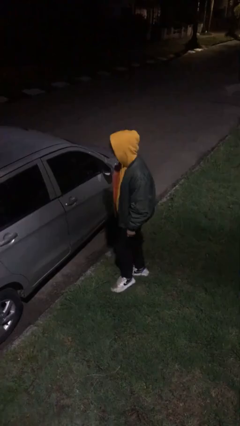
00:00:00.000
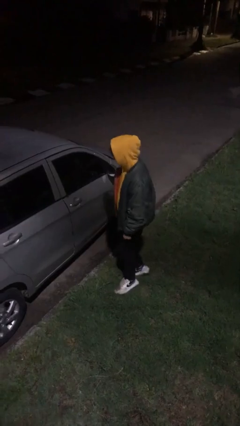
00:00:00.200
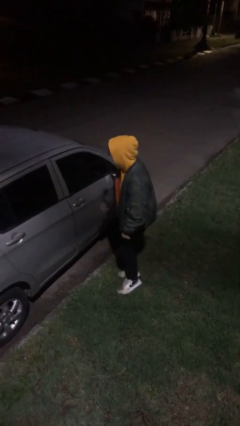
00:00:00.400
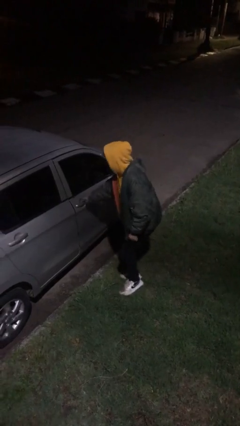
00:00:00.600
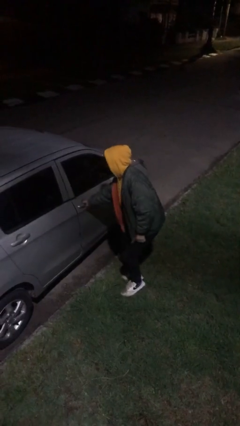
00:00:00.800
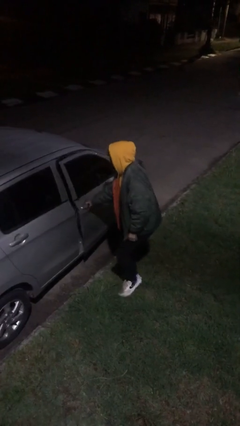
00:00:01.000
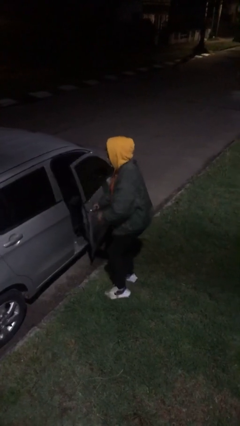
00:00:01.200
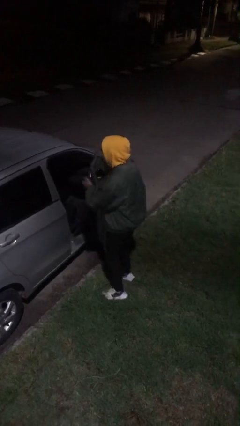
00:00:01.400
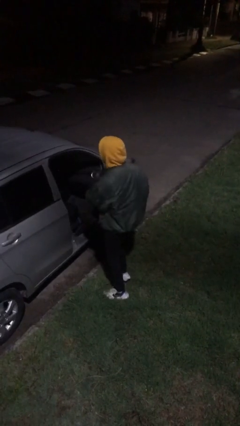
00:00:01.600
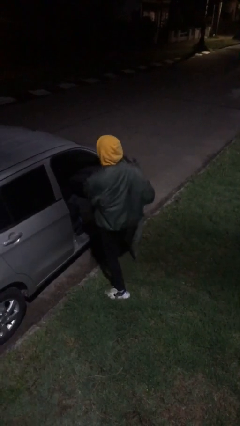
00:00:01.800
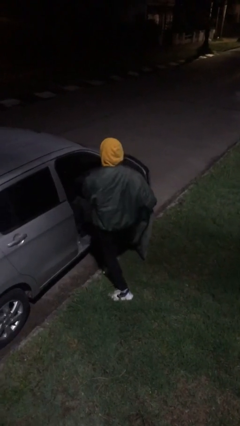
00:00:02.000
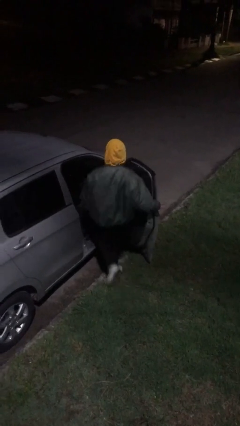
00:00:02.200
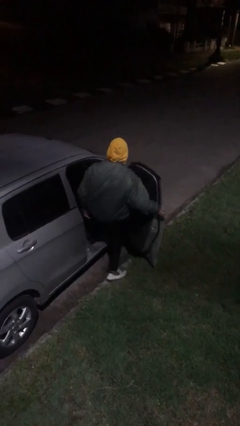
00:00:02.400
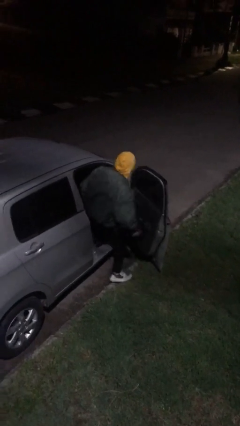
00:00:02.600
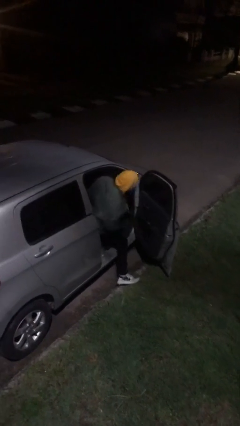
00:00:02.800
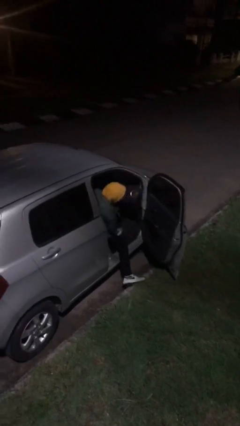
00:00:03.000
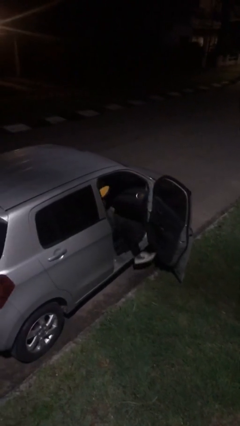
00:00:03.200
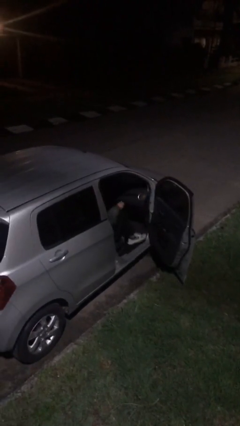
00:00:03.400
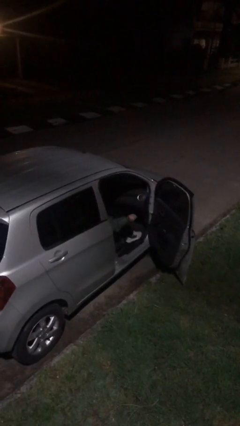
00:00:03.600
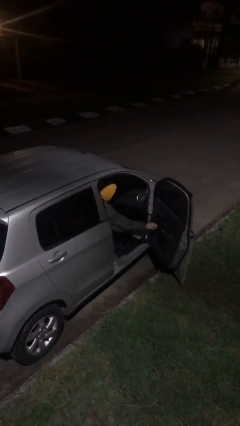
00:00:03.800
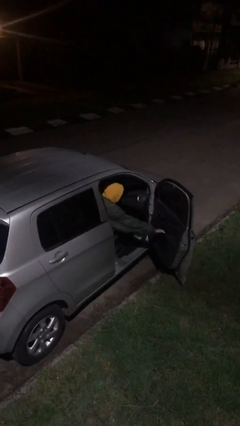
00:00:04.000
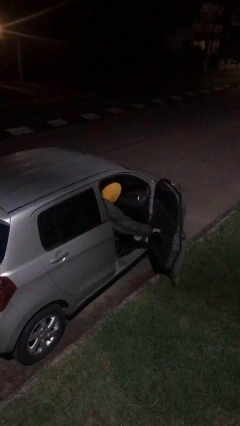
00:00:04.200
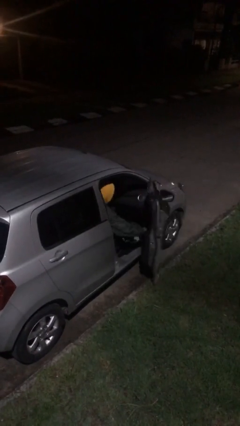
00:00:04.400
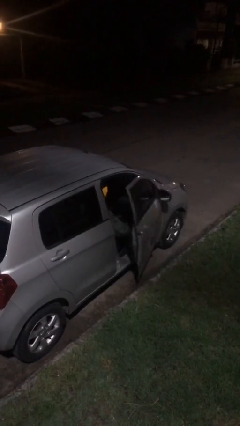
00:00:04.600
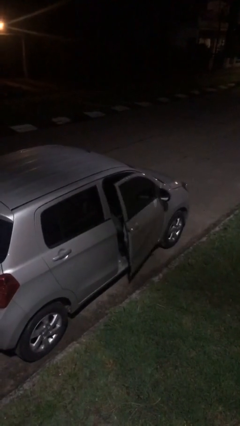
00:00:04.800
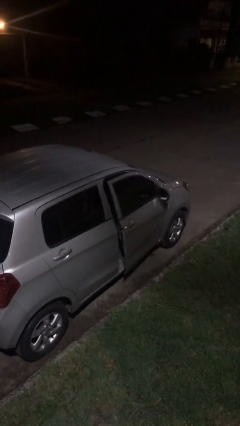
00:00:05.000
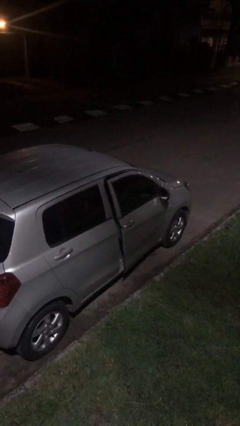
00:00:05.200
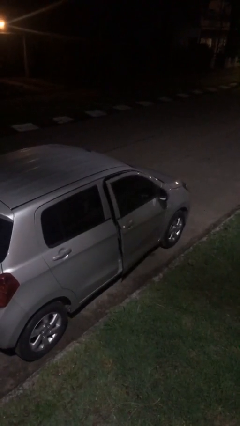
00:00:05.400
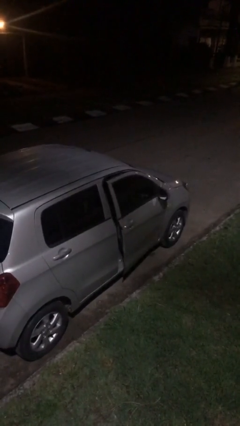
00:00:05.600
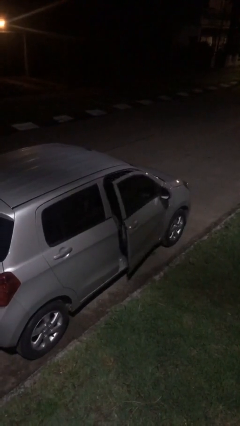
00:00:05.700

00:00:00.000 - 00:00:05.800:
car picks up person

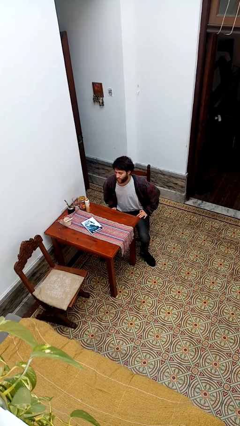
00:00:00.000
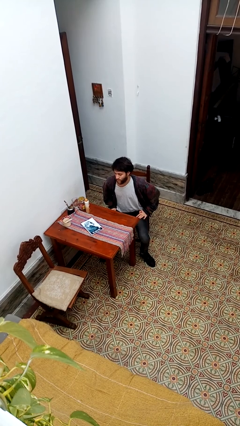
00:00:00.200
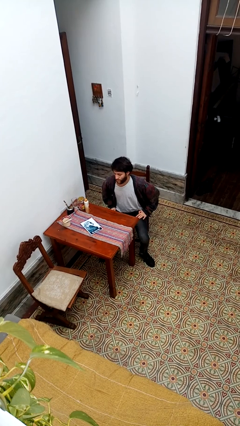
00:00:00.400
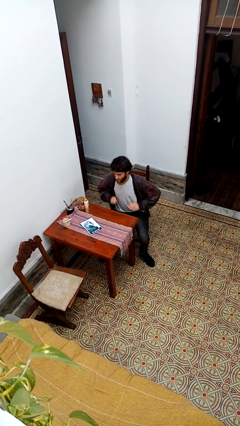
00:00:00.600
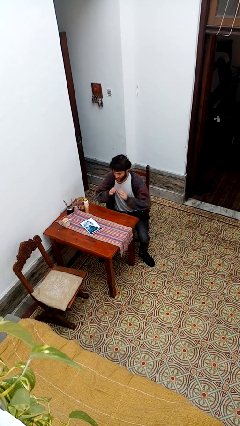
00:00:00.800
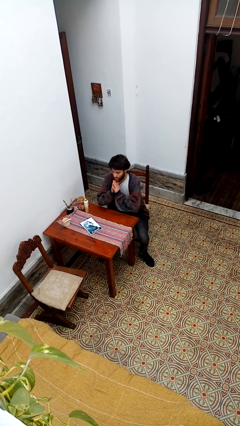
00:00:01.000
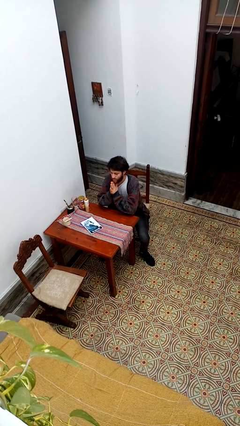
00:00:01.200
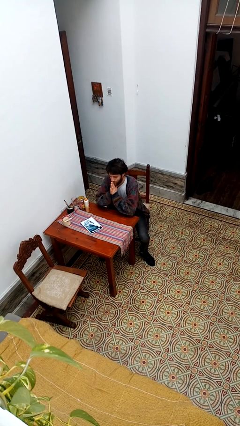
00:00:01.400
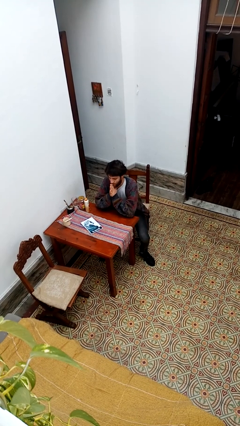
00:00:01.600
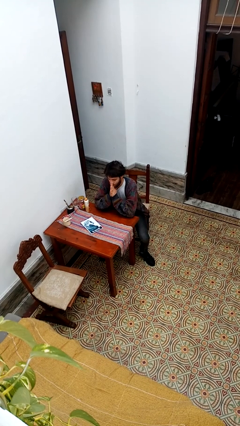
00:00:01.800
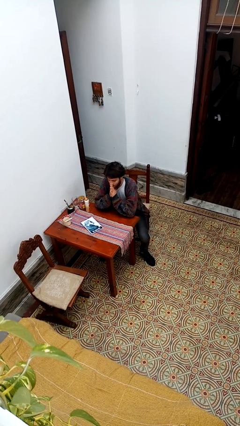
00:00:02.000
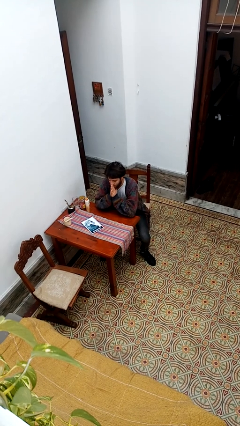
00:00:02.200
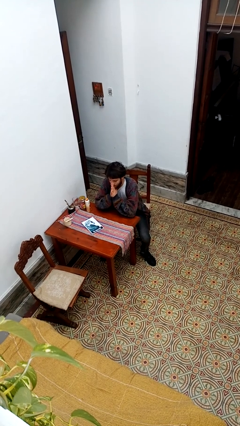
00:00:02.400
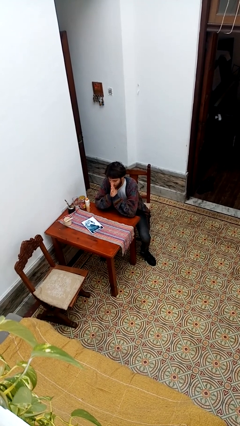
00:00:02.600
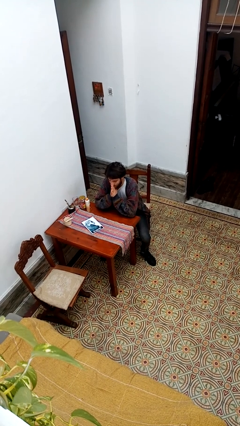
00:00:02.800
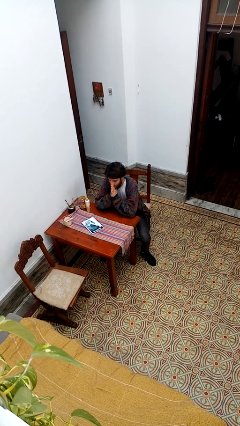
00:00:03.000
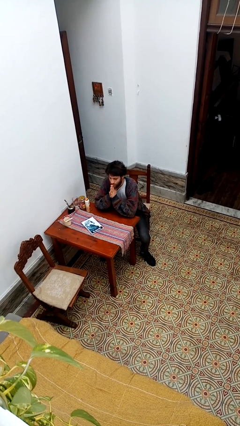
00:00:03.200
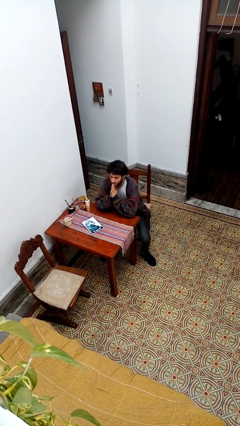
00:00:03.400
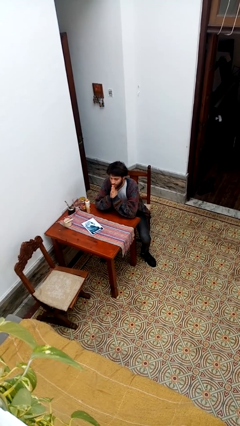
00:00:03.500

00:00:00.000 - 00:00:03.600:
person prays

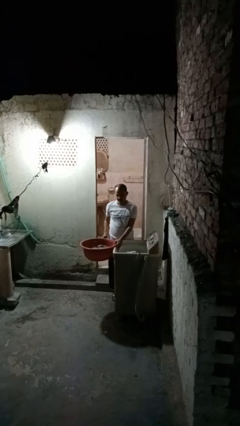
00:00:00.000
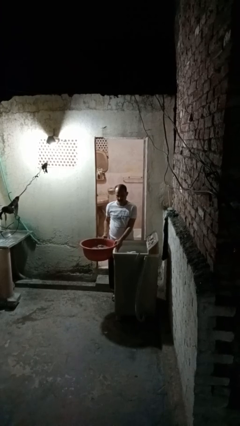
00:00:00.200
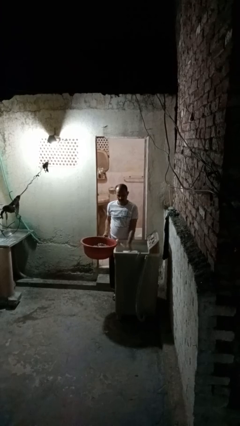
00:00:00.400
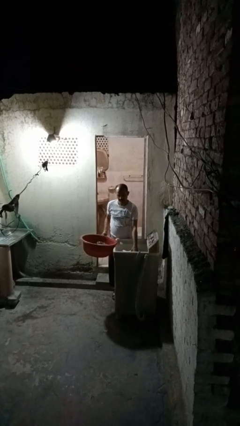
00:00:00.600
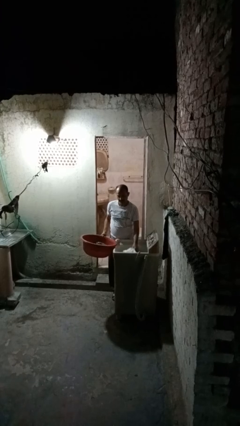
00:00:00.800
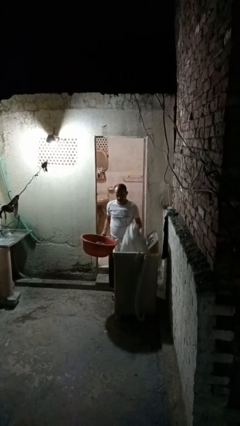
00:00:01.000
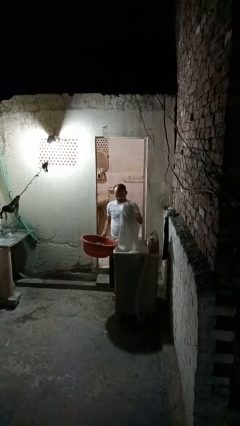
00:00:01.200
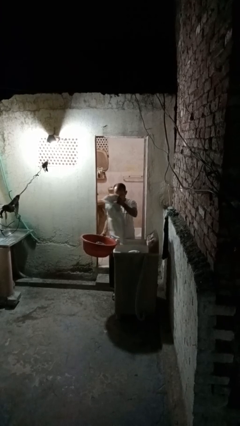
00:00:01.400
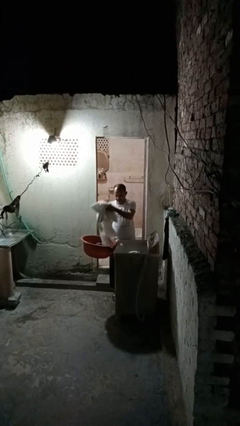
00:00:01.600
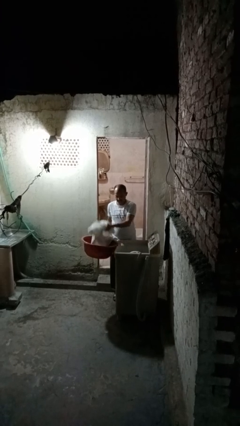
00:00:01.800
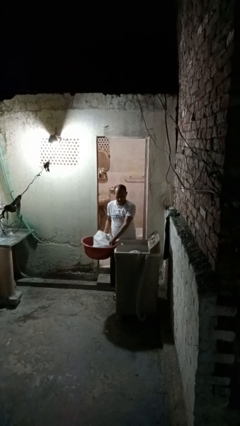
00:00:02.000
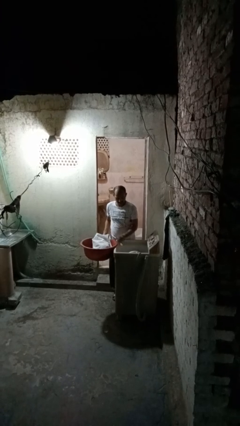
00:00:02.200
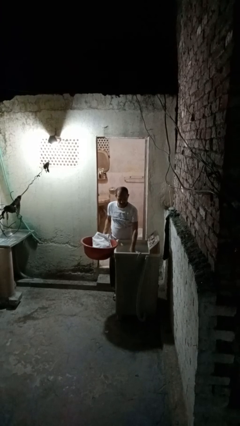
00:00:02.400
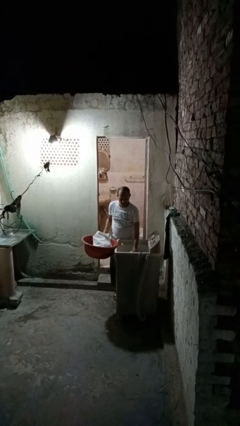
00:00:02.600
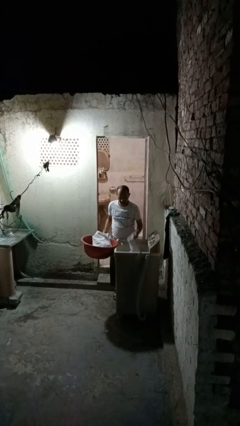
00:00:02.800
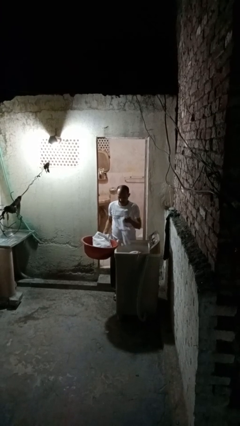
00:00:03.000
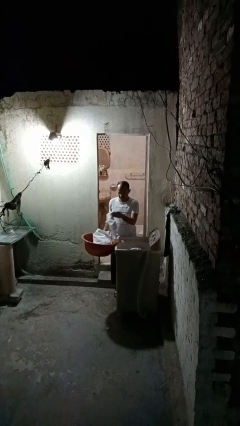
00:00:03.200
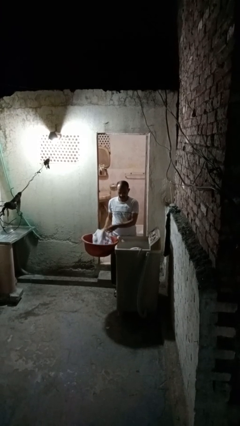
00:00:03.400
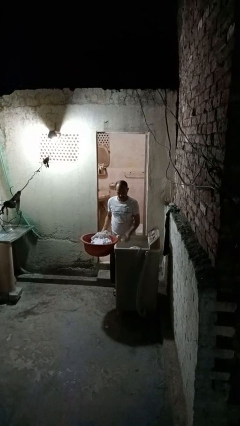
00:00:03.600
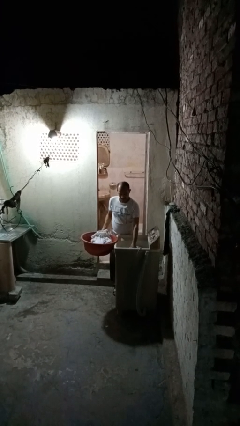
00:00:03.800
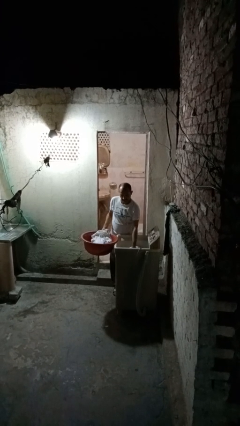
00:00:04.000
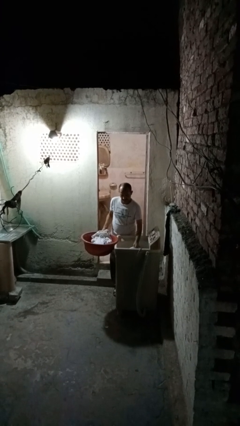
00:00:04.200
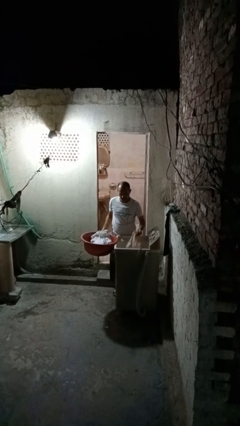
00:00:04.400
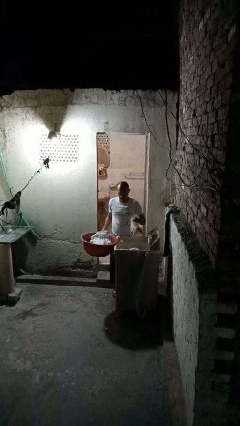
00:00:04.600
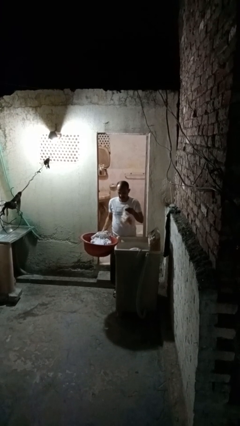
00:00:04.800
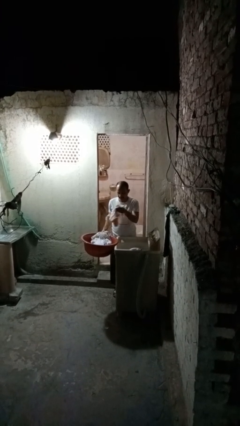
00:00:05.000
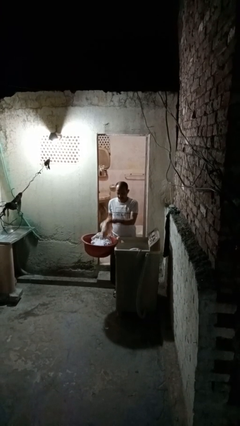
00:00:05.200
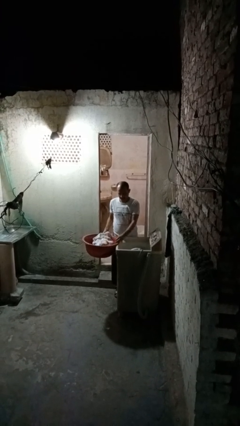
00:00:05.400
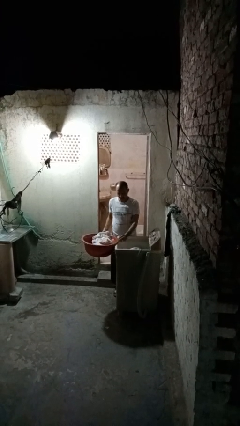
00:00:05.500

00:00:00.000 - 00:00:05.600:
person unloads clotheswasher

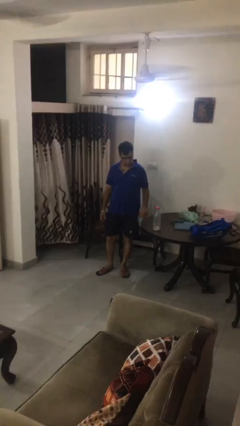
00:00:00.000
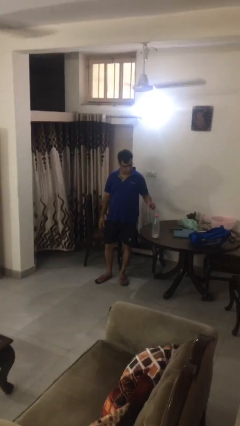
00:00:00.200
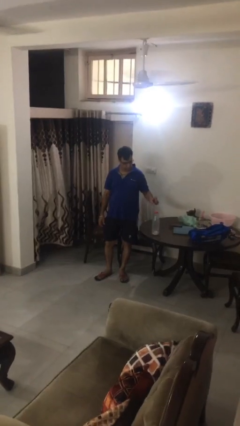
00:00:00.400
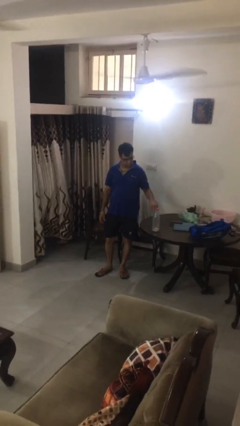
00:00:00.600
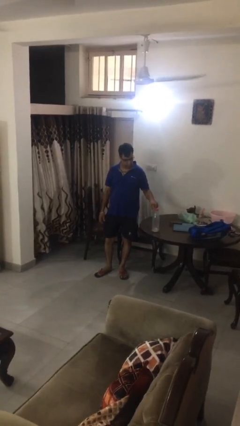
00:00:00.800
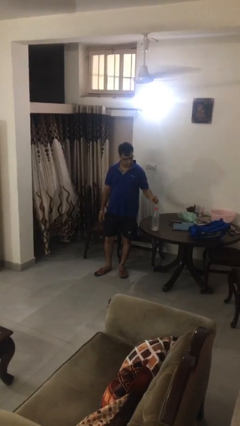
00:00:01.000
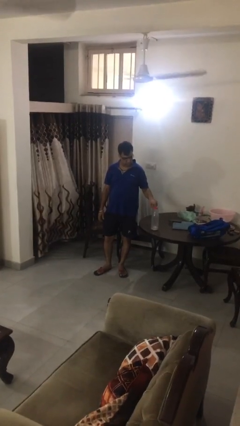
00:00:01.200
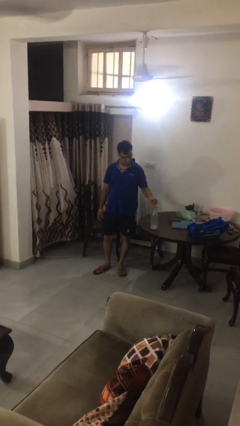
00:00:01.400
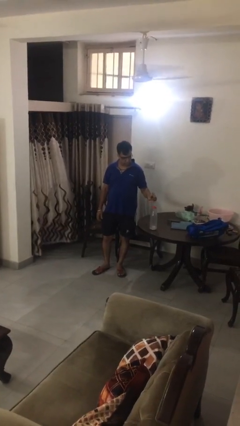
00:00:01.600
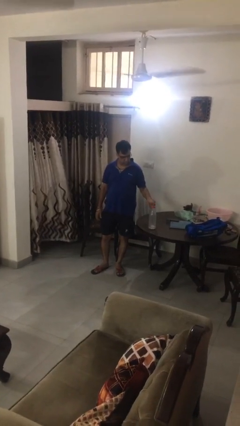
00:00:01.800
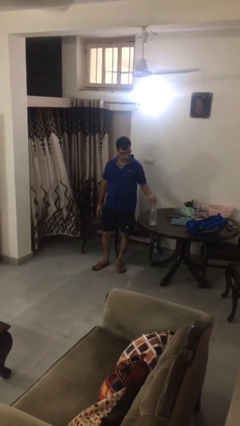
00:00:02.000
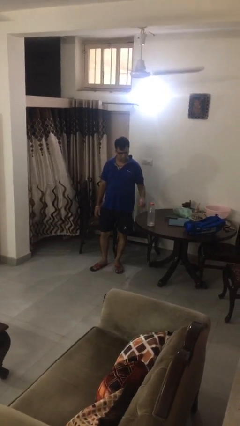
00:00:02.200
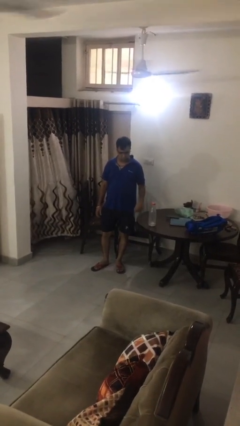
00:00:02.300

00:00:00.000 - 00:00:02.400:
person taps object with finger

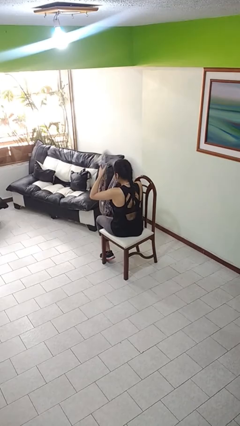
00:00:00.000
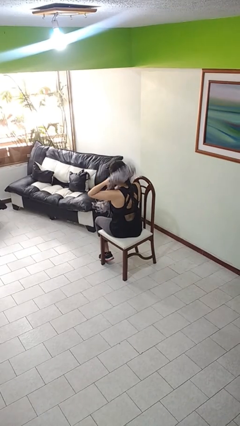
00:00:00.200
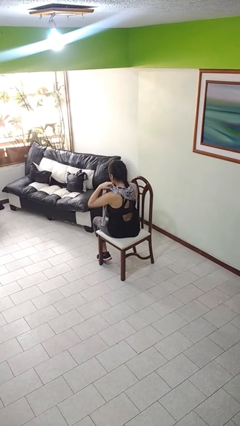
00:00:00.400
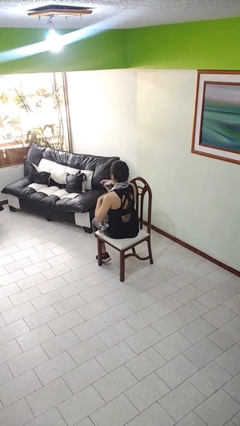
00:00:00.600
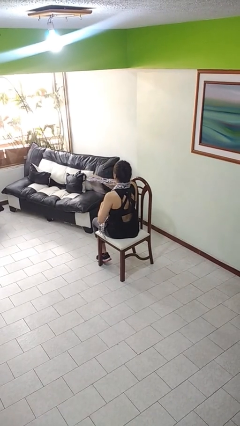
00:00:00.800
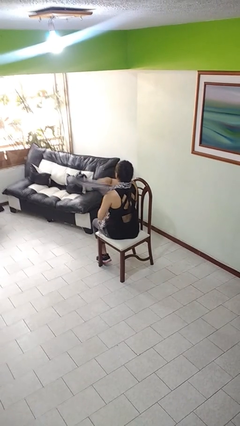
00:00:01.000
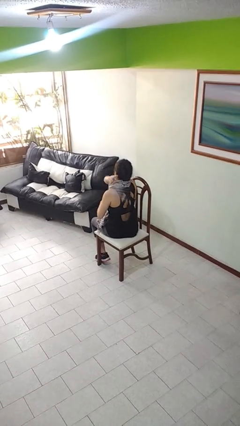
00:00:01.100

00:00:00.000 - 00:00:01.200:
person puts on scarf
